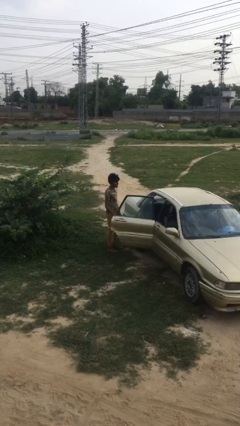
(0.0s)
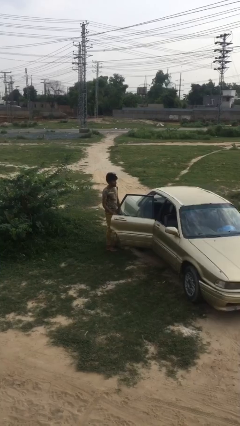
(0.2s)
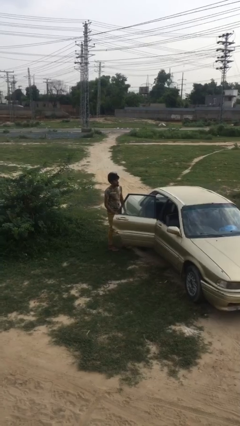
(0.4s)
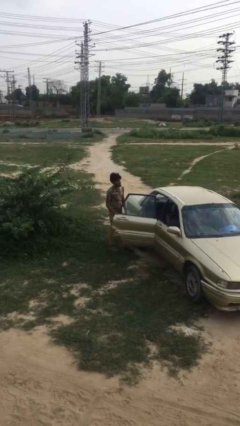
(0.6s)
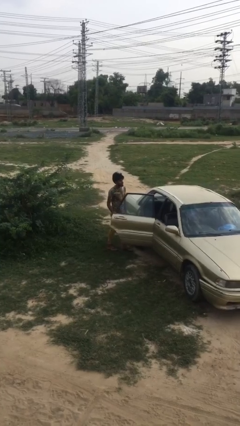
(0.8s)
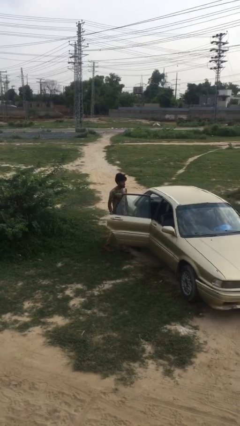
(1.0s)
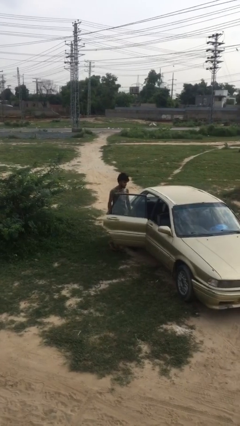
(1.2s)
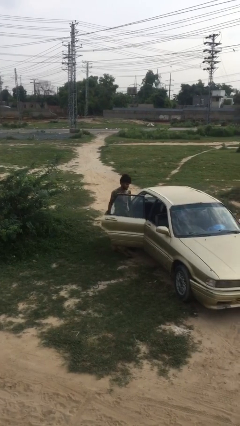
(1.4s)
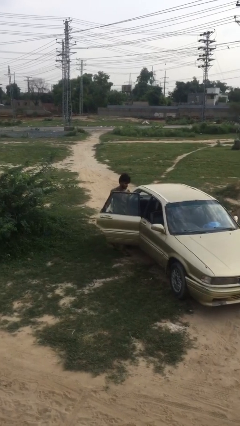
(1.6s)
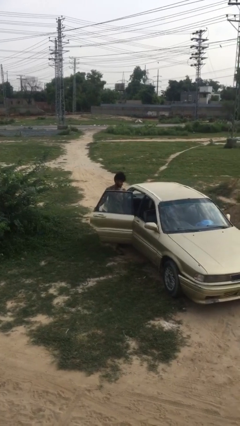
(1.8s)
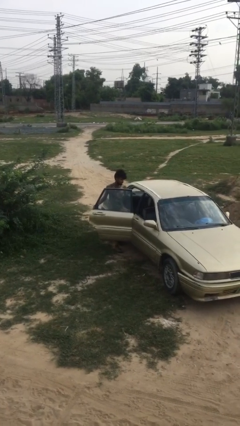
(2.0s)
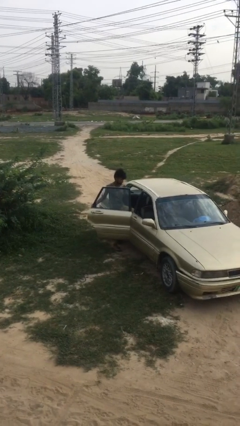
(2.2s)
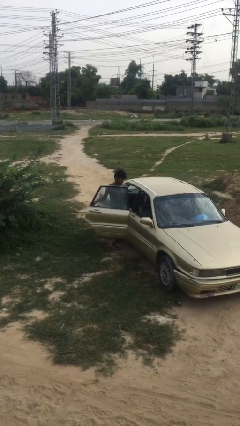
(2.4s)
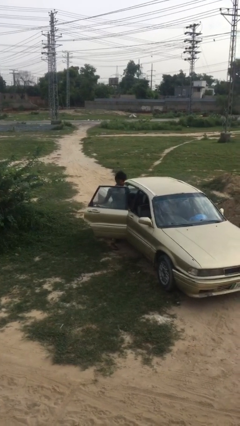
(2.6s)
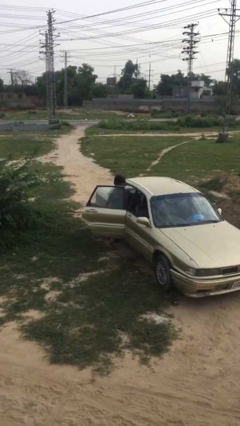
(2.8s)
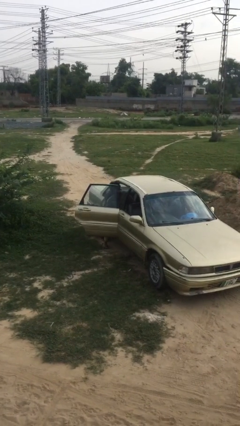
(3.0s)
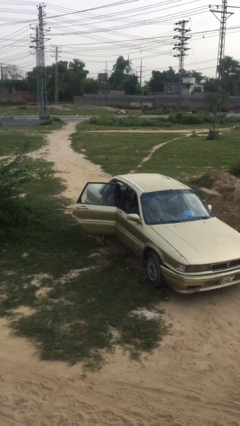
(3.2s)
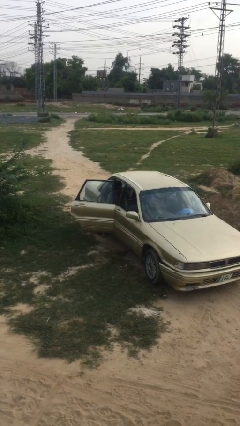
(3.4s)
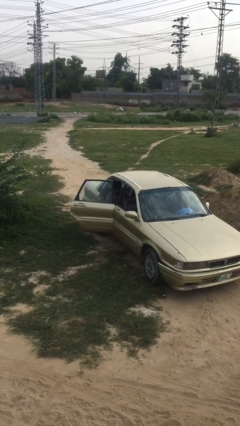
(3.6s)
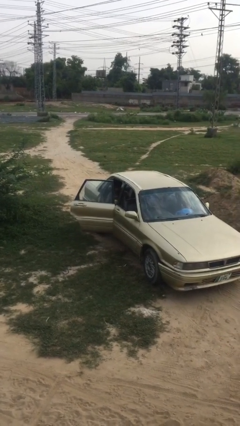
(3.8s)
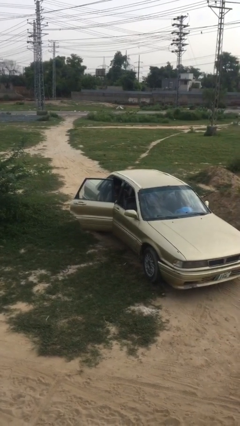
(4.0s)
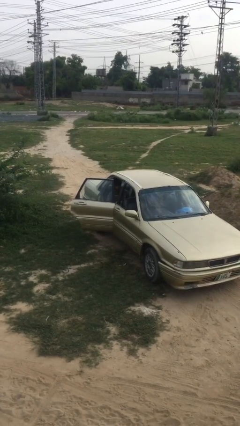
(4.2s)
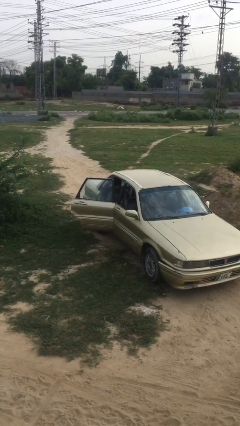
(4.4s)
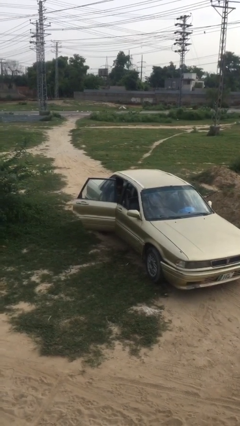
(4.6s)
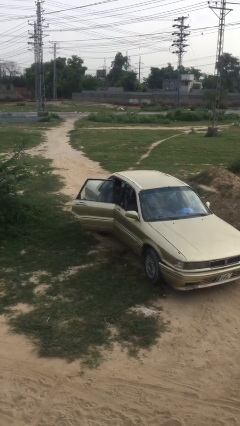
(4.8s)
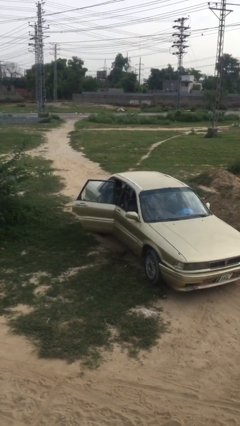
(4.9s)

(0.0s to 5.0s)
person enters car

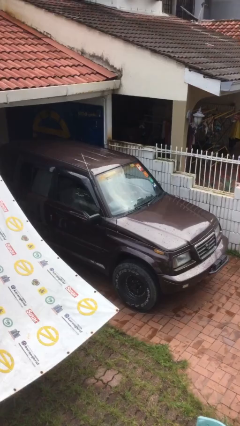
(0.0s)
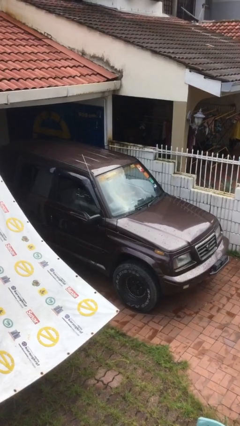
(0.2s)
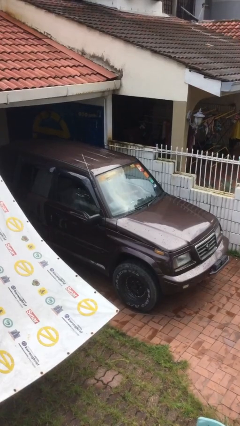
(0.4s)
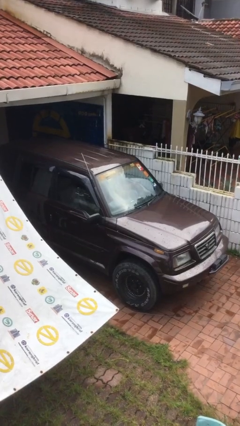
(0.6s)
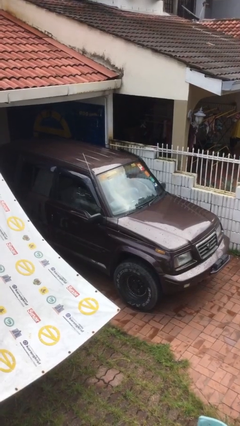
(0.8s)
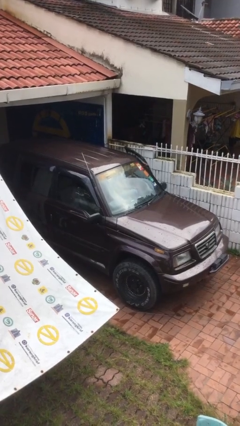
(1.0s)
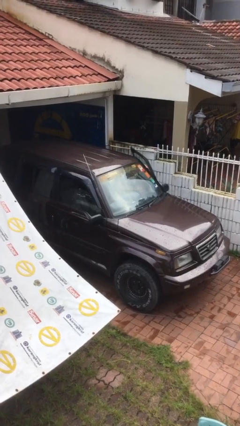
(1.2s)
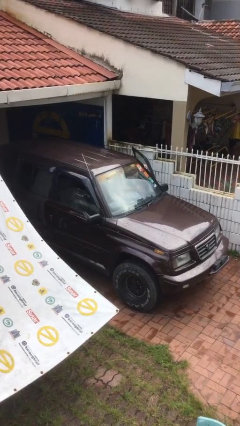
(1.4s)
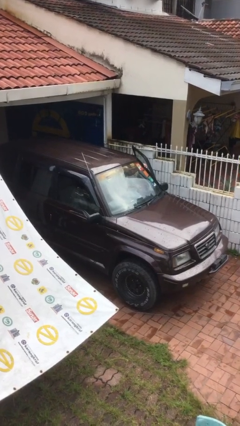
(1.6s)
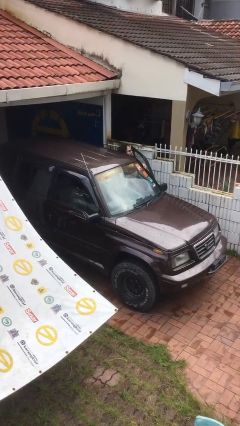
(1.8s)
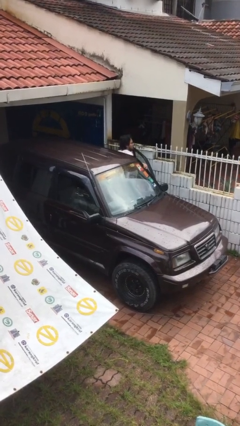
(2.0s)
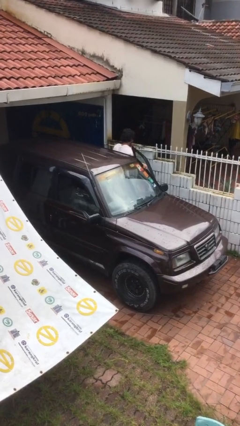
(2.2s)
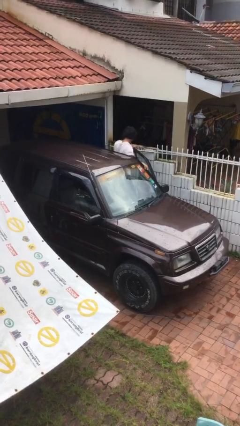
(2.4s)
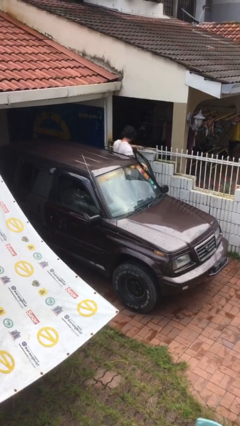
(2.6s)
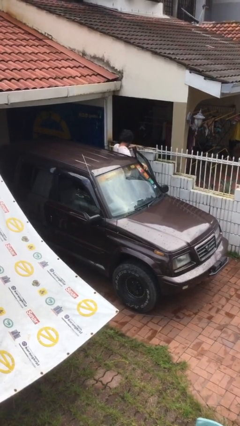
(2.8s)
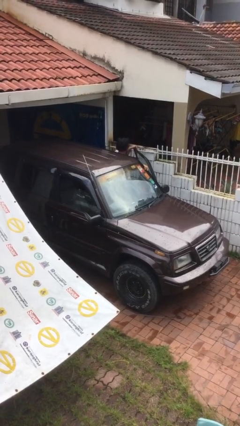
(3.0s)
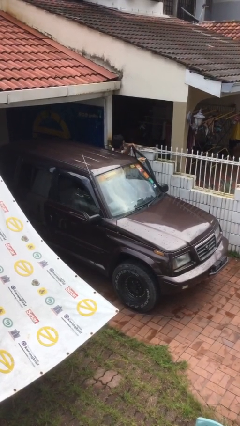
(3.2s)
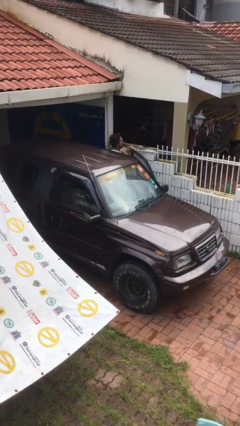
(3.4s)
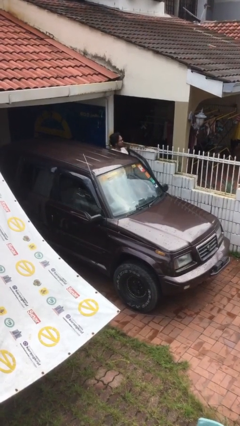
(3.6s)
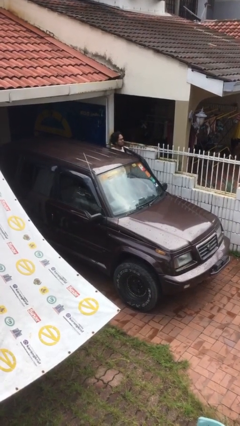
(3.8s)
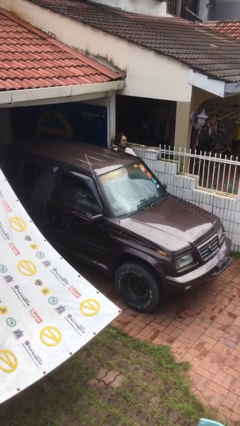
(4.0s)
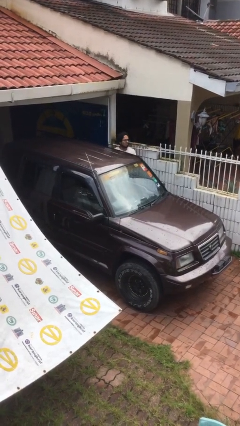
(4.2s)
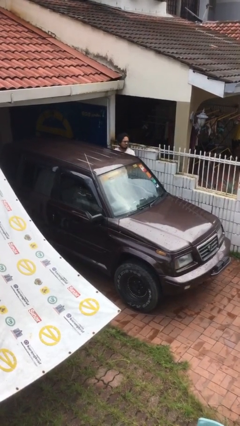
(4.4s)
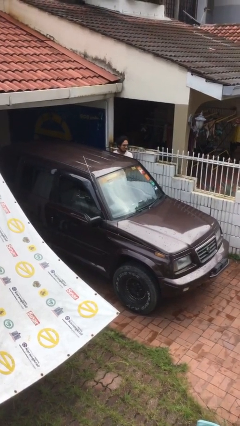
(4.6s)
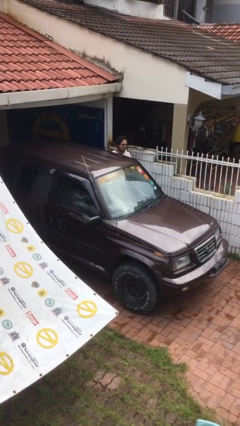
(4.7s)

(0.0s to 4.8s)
car drops off person

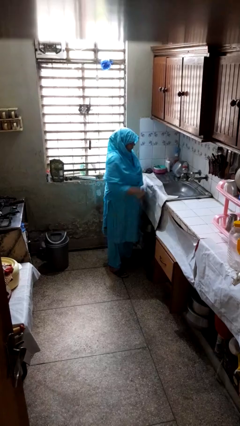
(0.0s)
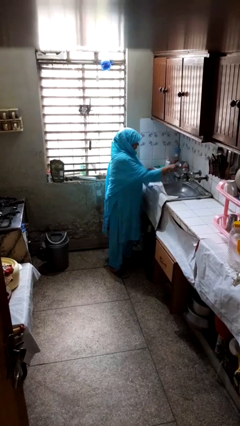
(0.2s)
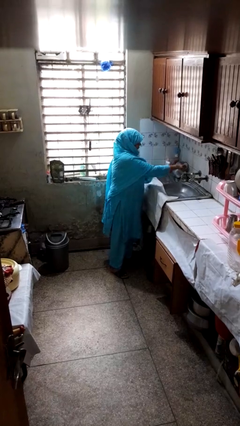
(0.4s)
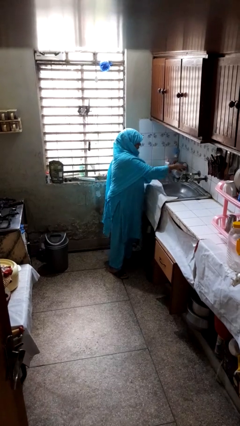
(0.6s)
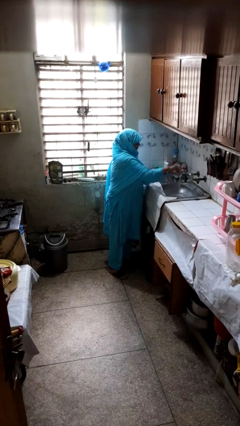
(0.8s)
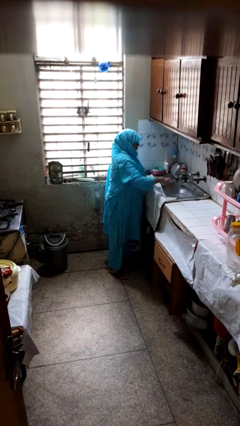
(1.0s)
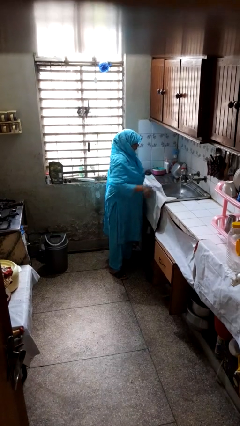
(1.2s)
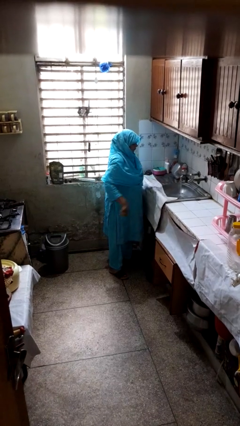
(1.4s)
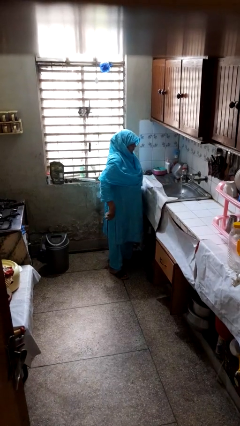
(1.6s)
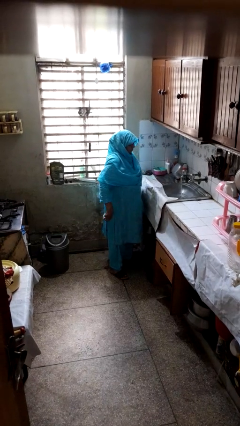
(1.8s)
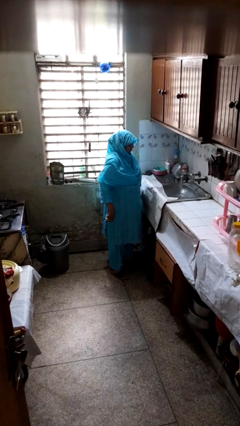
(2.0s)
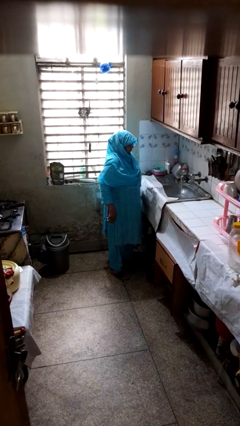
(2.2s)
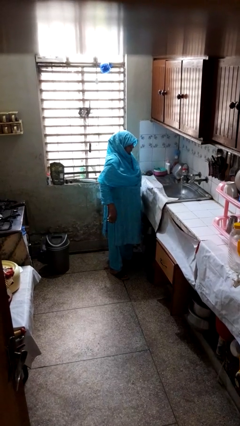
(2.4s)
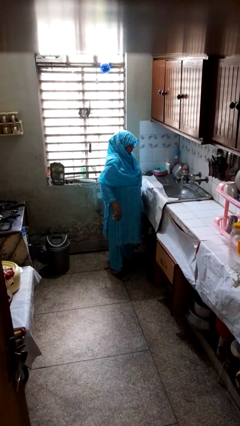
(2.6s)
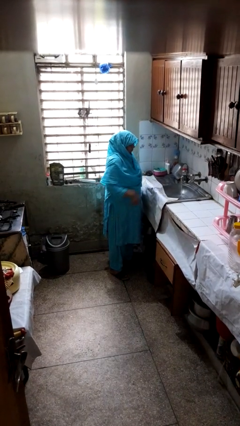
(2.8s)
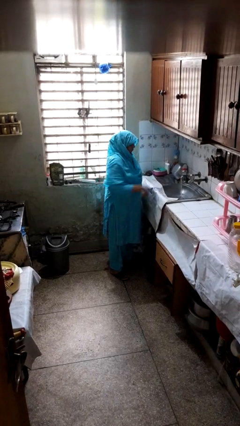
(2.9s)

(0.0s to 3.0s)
person turns on faucet

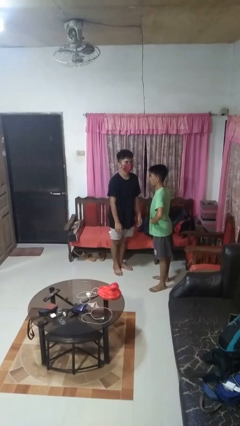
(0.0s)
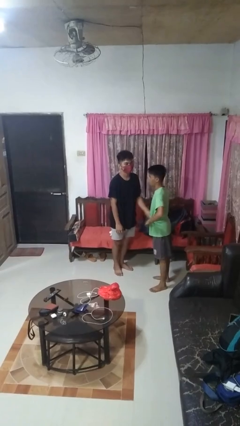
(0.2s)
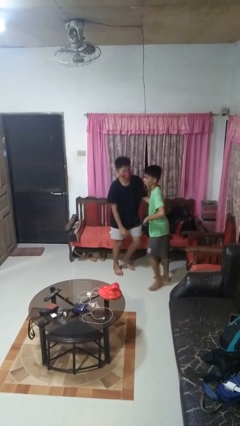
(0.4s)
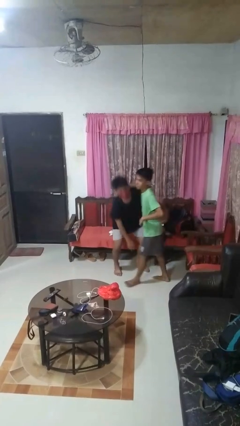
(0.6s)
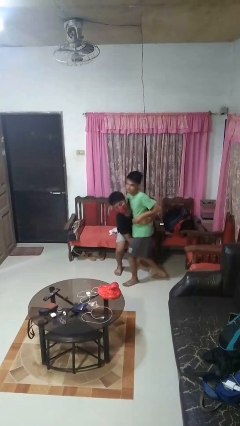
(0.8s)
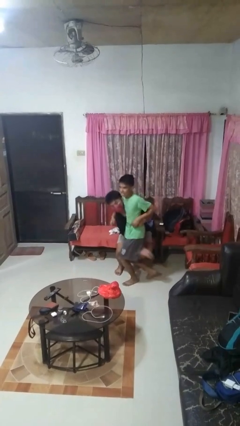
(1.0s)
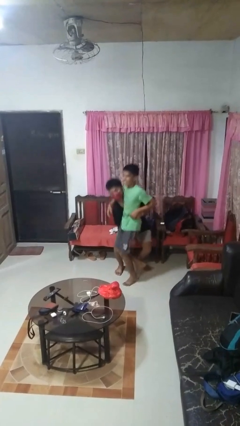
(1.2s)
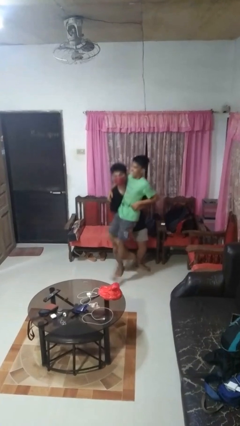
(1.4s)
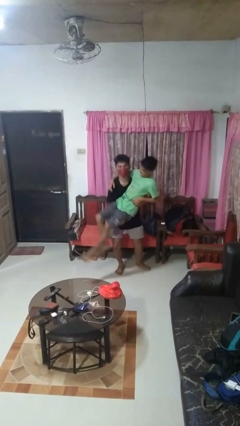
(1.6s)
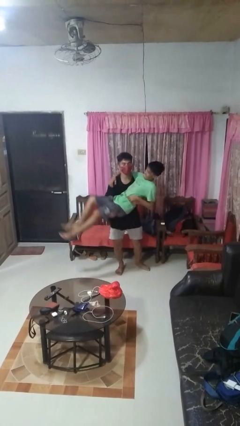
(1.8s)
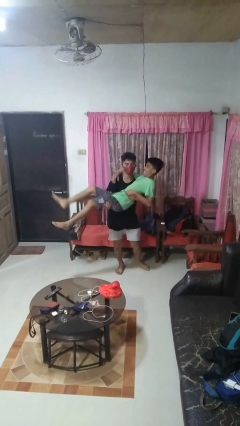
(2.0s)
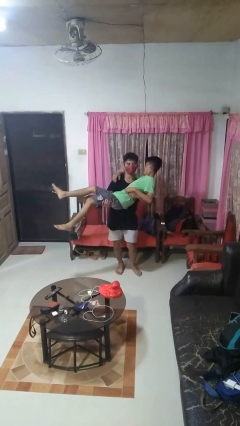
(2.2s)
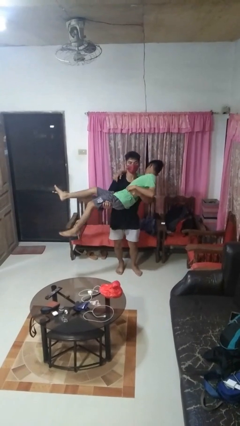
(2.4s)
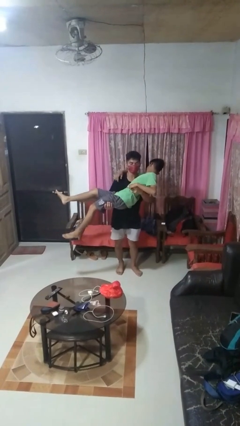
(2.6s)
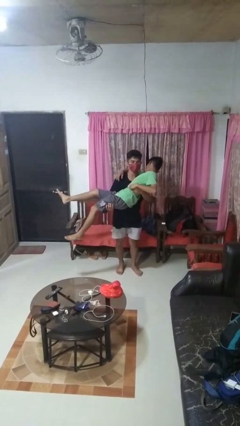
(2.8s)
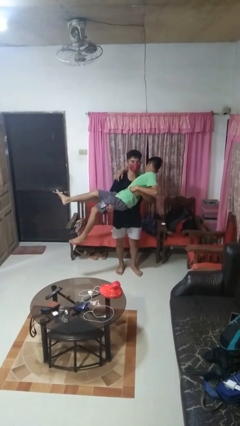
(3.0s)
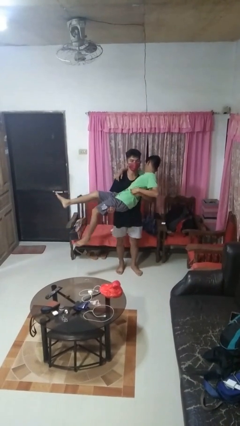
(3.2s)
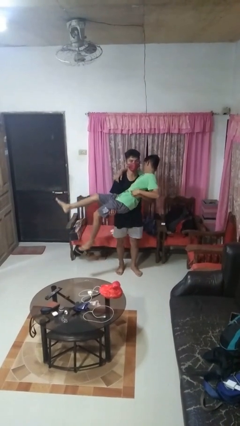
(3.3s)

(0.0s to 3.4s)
person picks up person

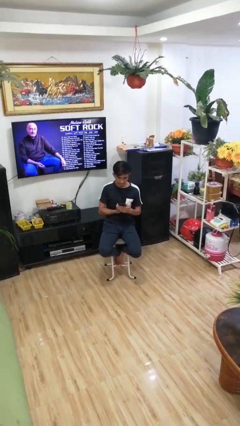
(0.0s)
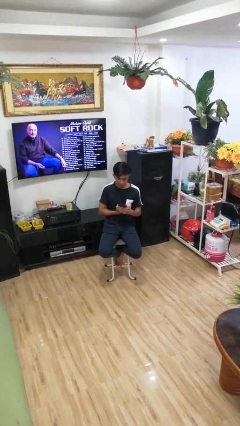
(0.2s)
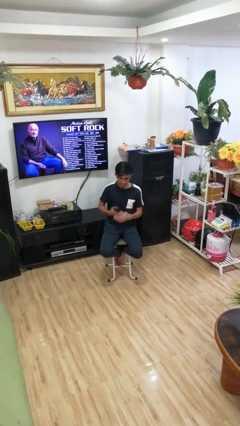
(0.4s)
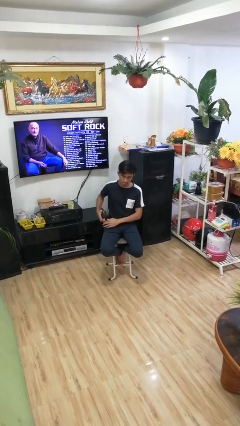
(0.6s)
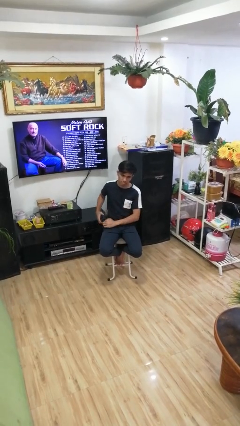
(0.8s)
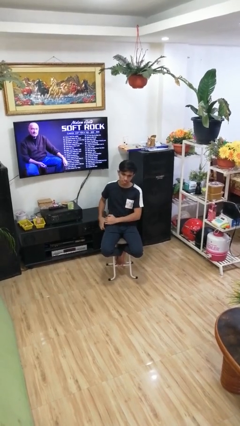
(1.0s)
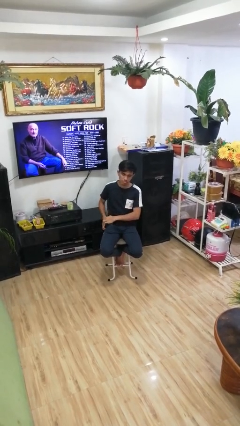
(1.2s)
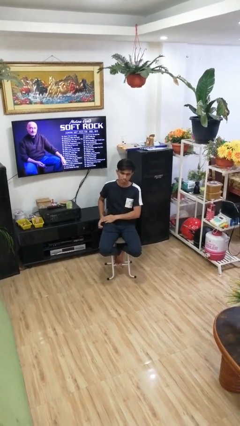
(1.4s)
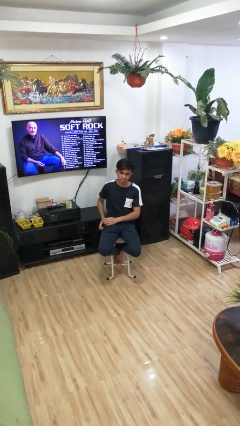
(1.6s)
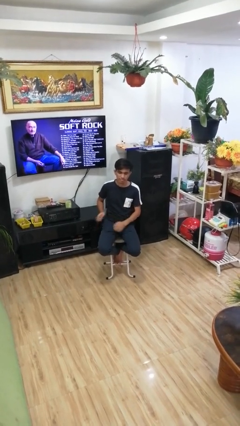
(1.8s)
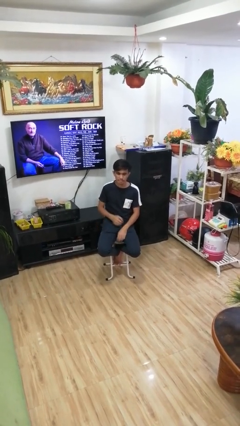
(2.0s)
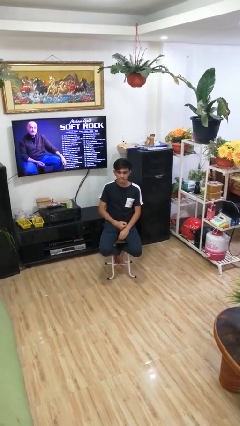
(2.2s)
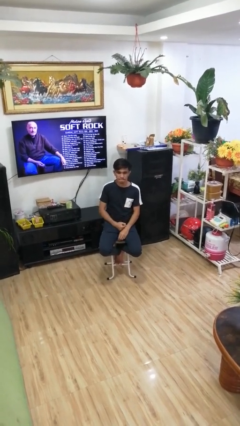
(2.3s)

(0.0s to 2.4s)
person puts phone into pocket
